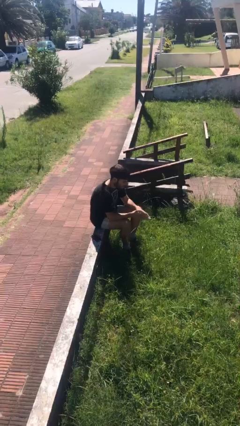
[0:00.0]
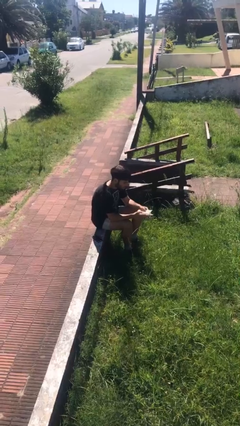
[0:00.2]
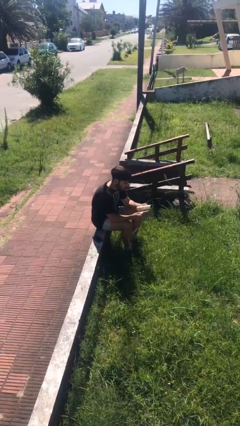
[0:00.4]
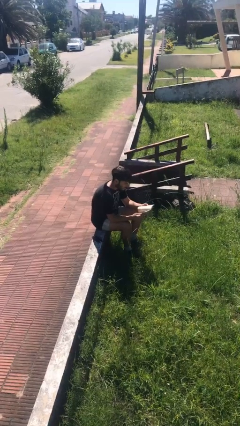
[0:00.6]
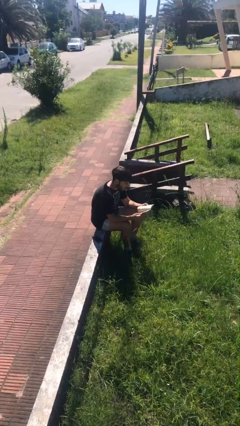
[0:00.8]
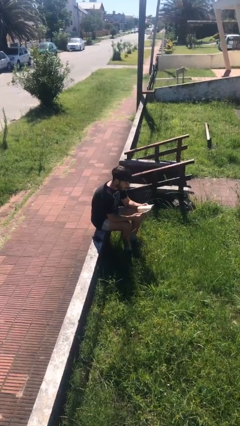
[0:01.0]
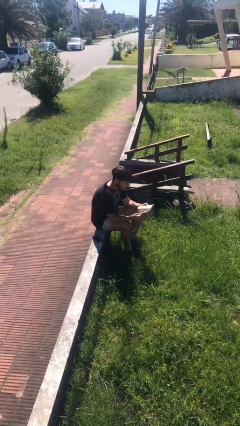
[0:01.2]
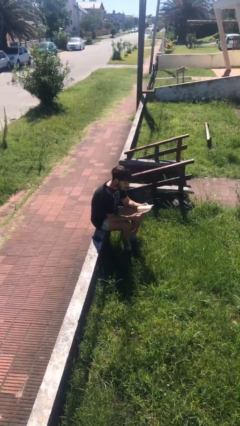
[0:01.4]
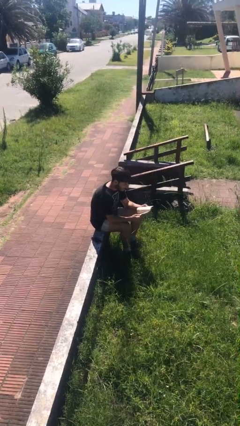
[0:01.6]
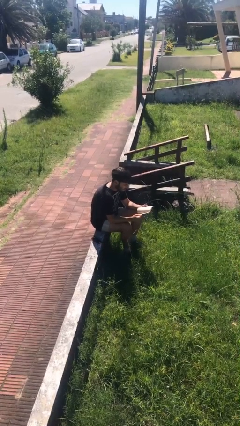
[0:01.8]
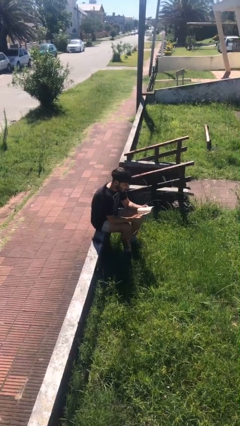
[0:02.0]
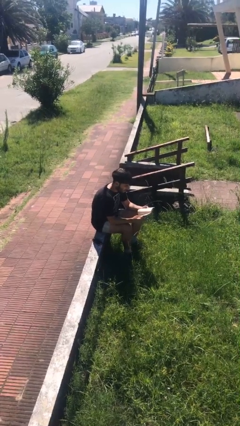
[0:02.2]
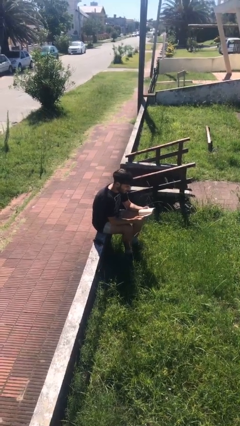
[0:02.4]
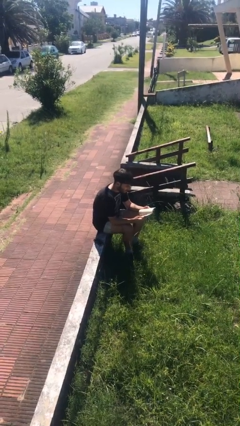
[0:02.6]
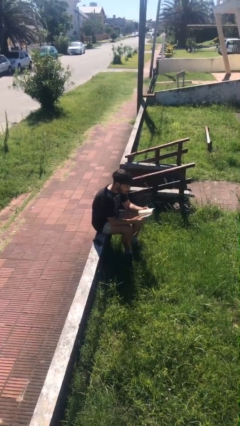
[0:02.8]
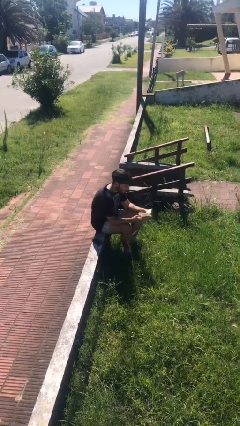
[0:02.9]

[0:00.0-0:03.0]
person reads document

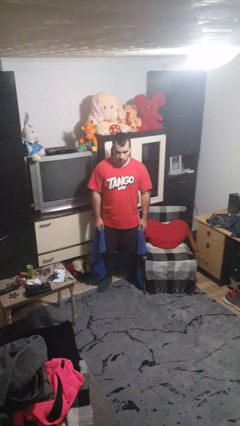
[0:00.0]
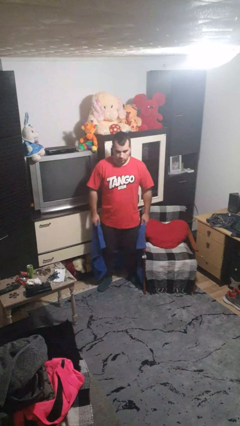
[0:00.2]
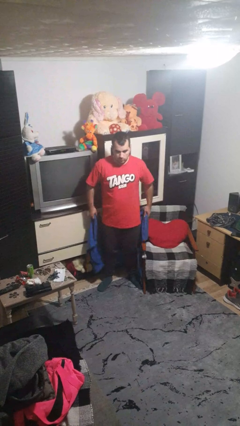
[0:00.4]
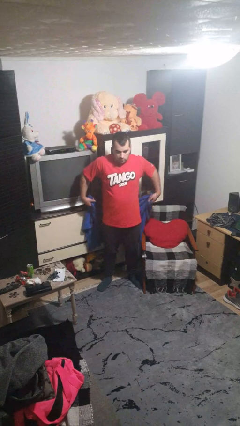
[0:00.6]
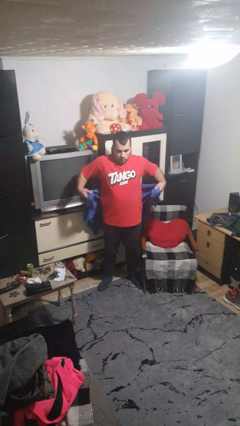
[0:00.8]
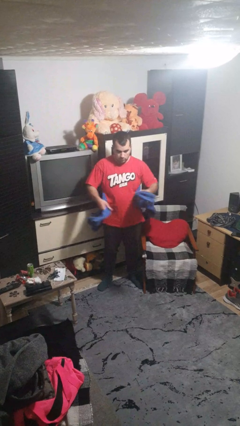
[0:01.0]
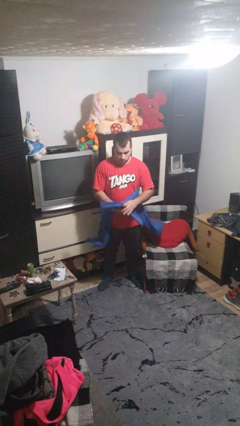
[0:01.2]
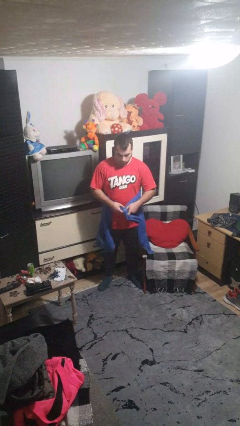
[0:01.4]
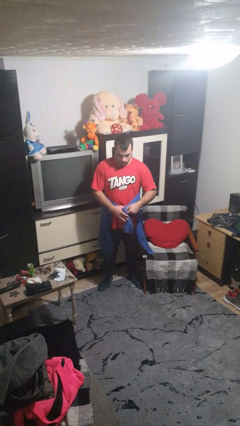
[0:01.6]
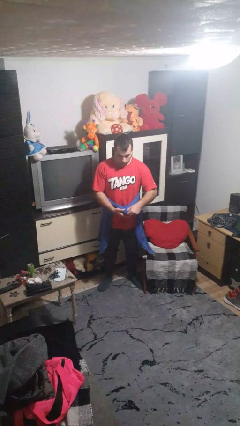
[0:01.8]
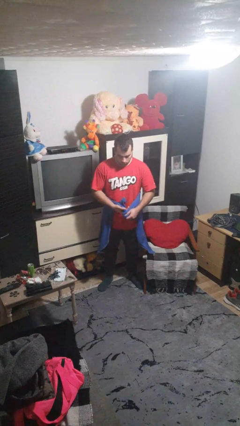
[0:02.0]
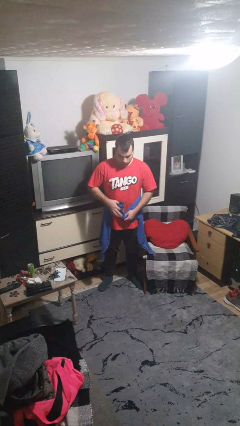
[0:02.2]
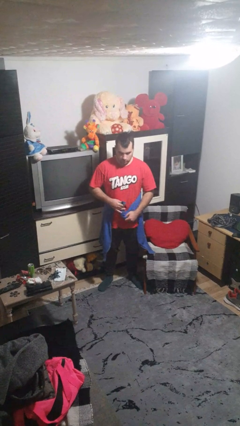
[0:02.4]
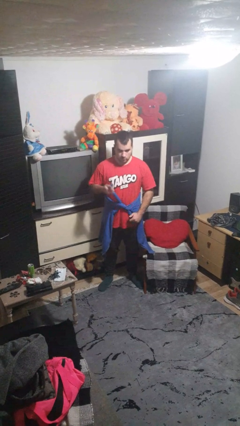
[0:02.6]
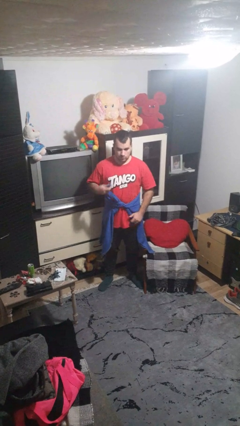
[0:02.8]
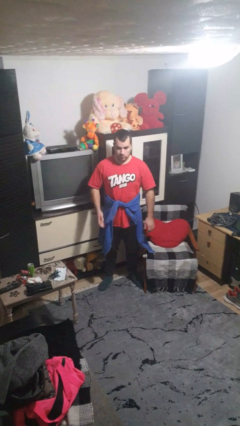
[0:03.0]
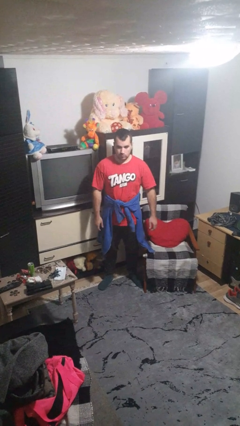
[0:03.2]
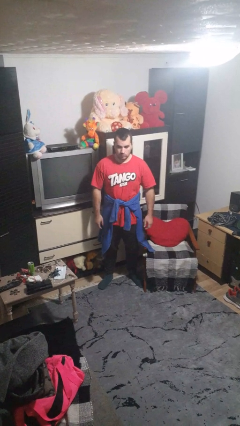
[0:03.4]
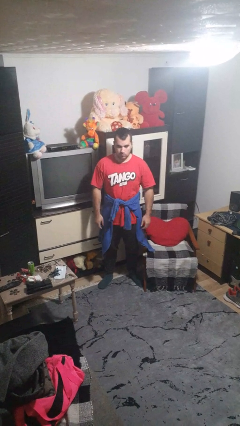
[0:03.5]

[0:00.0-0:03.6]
person ties jacket around waist

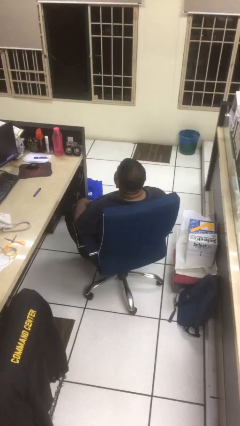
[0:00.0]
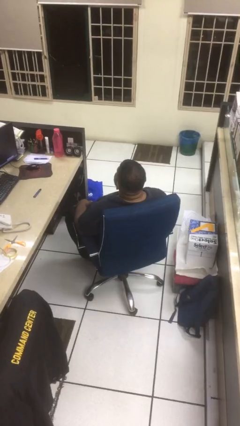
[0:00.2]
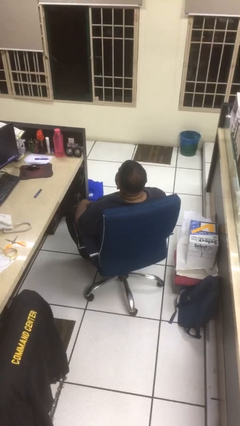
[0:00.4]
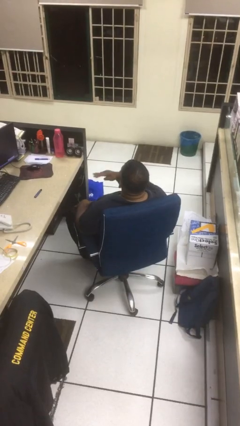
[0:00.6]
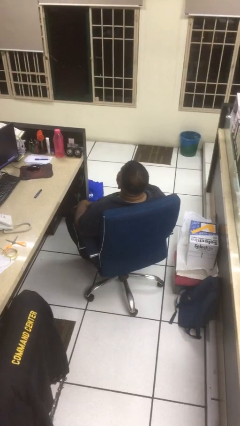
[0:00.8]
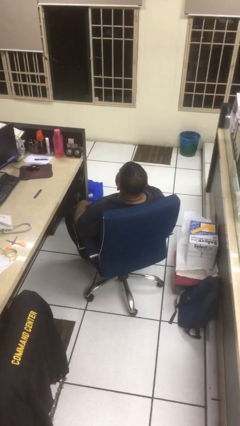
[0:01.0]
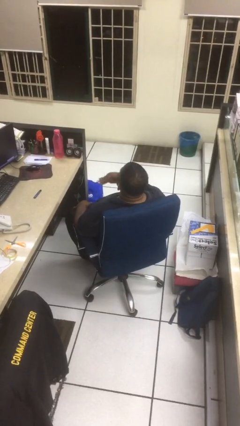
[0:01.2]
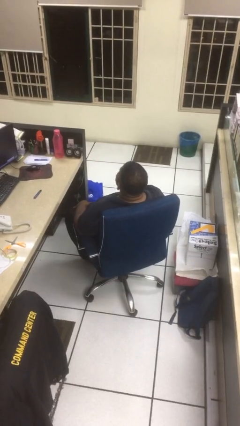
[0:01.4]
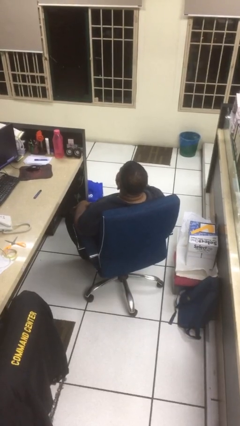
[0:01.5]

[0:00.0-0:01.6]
person gestures cut

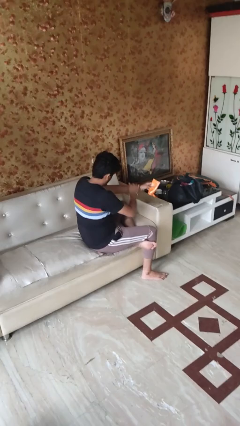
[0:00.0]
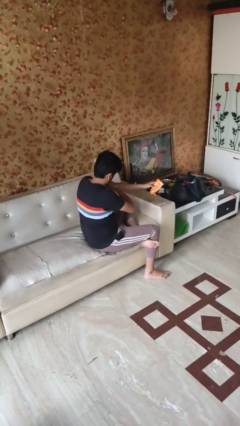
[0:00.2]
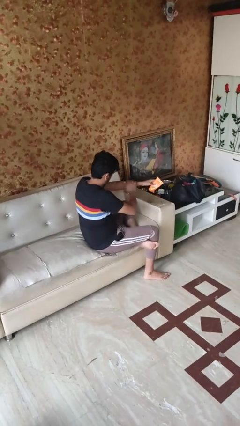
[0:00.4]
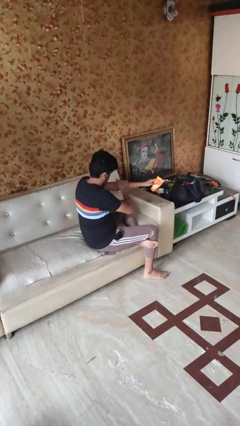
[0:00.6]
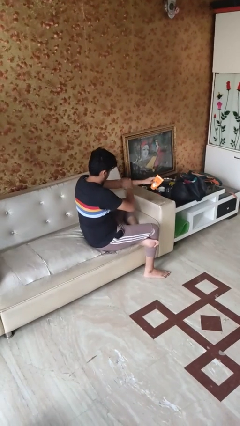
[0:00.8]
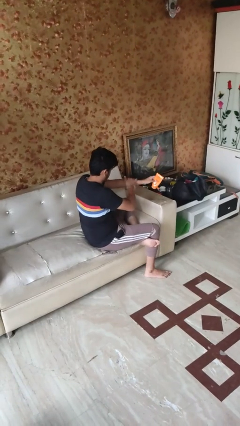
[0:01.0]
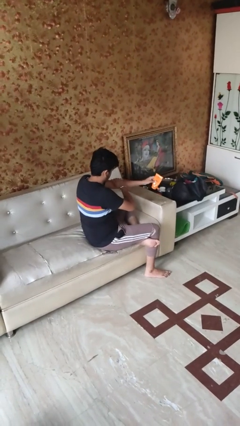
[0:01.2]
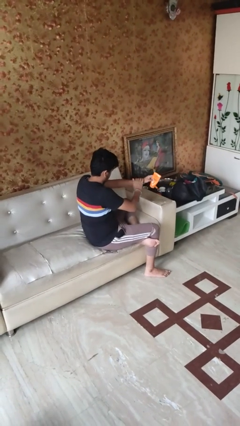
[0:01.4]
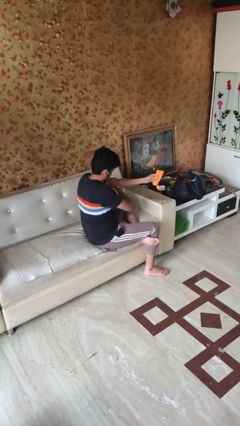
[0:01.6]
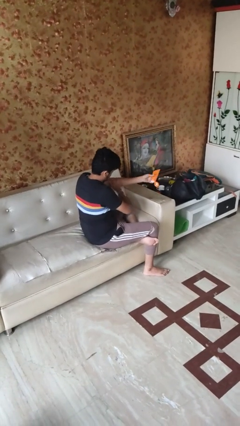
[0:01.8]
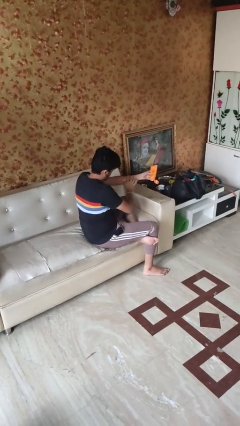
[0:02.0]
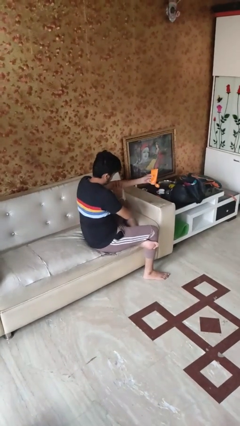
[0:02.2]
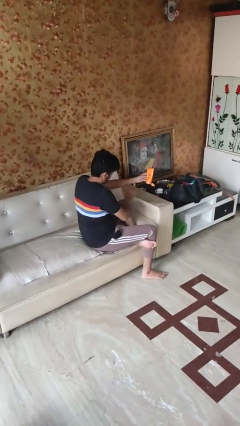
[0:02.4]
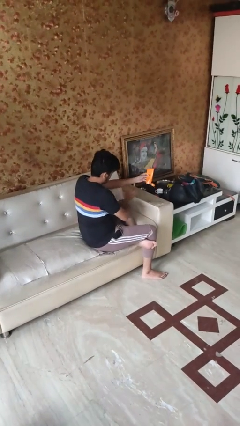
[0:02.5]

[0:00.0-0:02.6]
person applies sunscreen

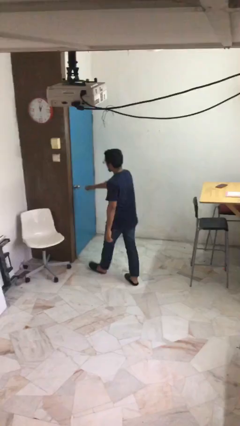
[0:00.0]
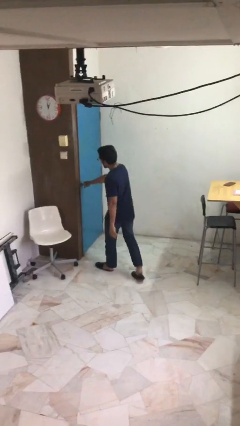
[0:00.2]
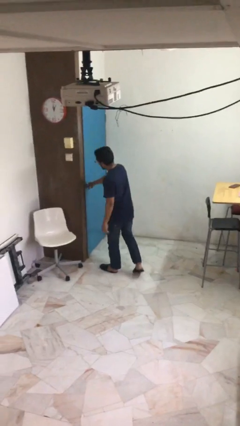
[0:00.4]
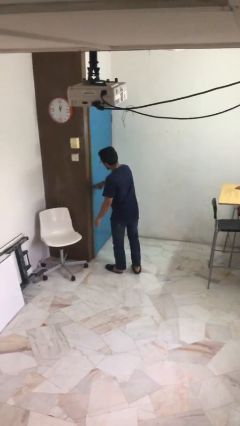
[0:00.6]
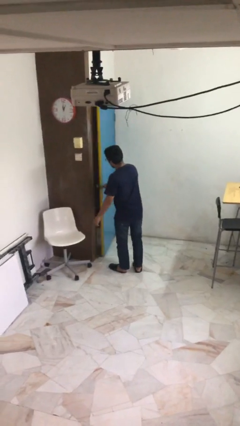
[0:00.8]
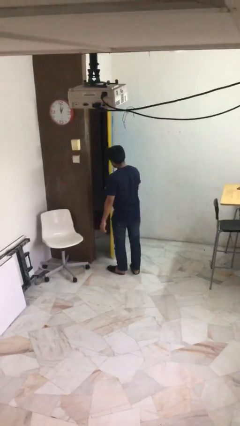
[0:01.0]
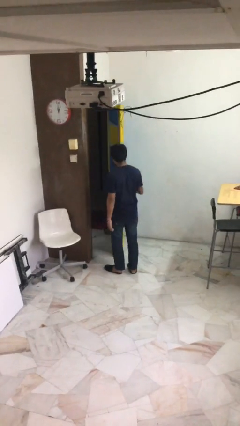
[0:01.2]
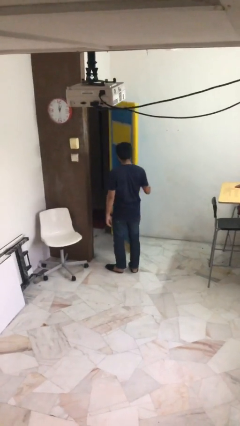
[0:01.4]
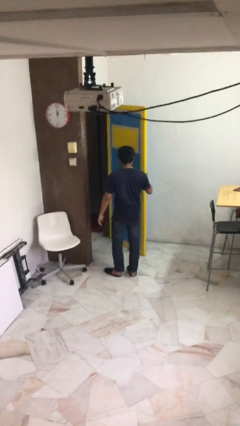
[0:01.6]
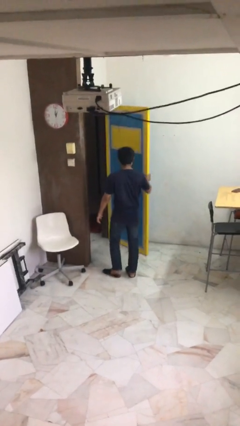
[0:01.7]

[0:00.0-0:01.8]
person opens facility door

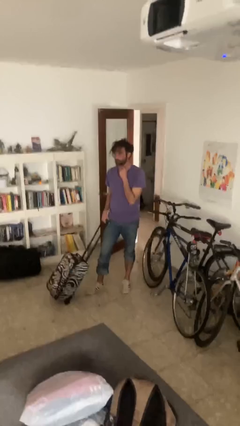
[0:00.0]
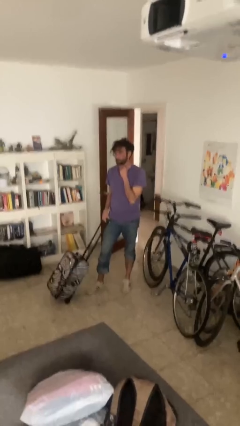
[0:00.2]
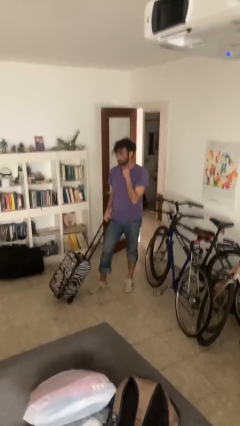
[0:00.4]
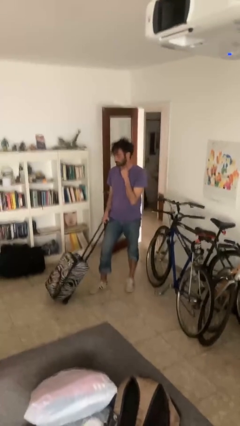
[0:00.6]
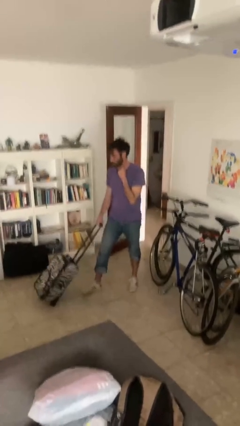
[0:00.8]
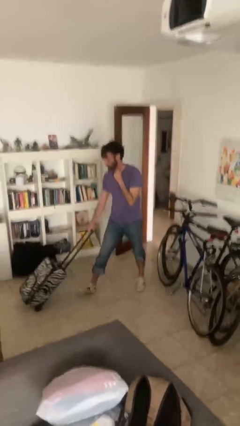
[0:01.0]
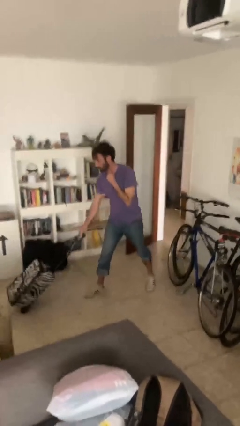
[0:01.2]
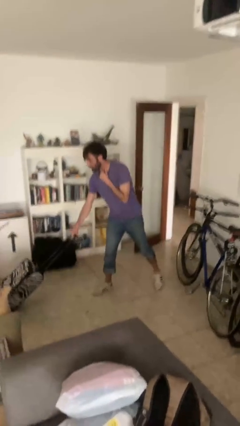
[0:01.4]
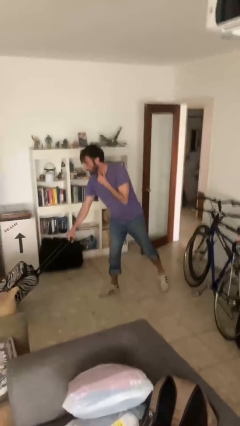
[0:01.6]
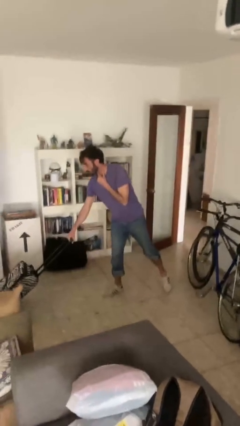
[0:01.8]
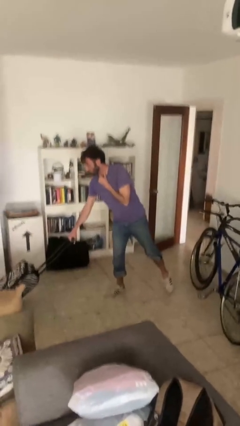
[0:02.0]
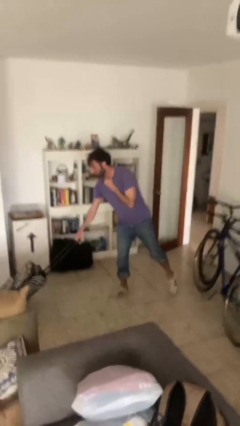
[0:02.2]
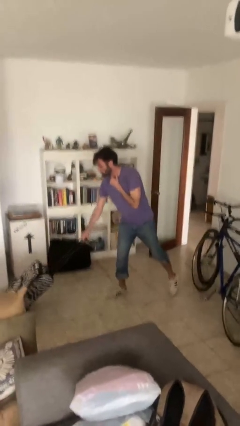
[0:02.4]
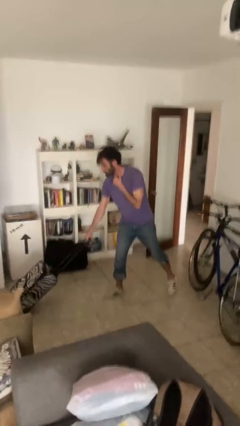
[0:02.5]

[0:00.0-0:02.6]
person pushes wheeled cart

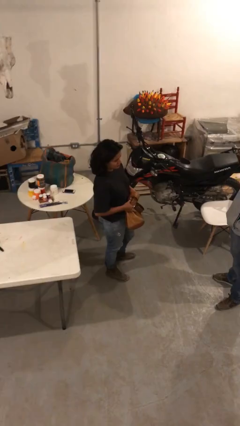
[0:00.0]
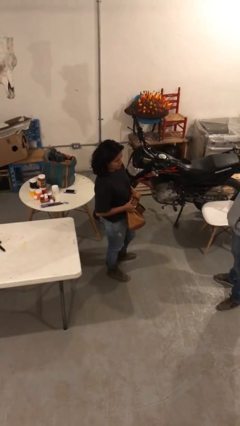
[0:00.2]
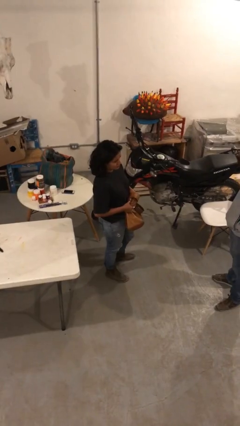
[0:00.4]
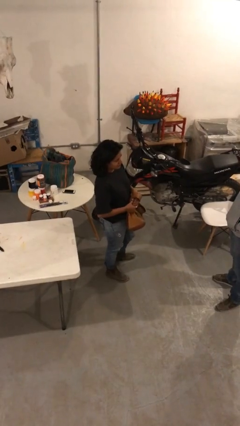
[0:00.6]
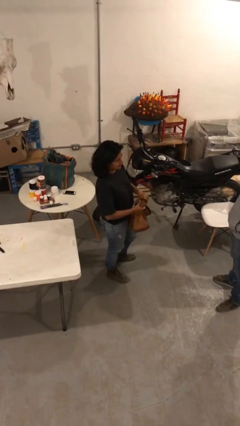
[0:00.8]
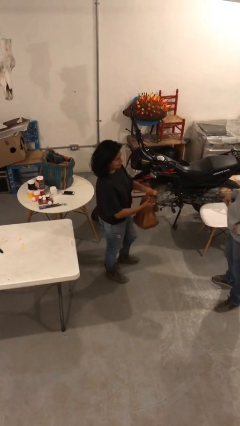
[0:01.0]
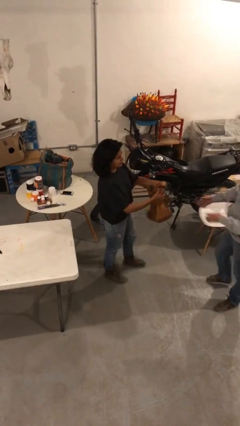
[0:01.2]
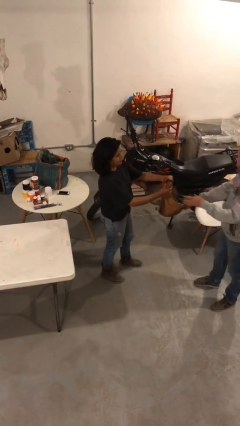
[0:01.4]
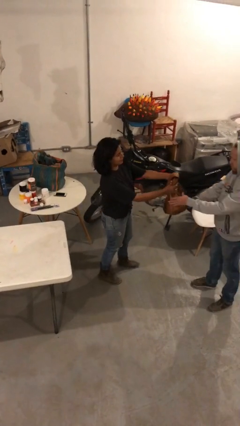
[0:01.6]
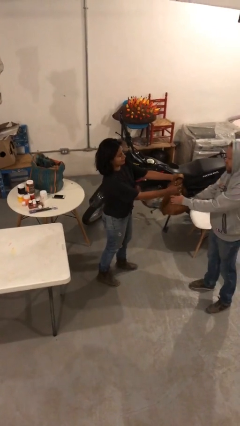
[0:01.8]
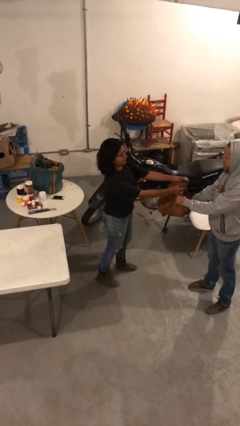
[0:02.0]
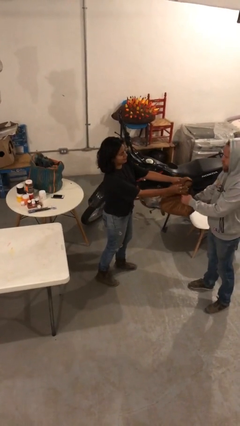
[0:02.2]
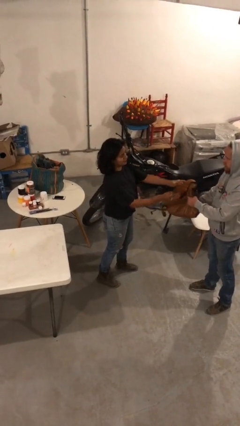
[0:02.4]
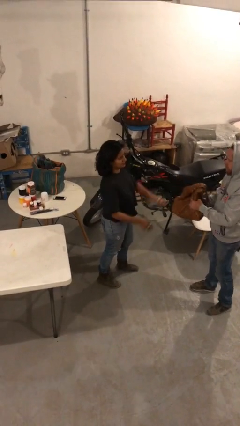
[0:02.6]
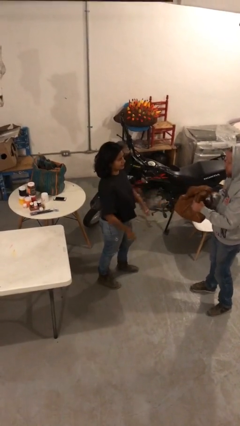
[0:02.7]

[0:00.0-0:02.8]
person transfers object to person
